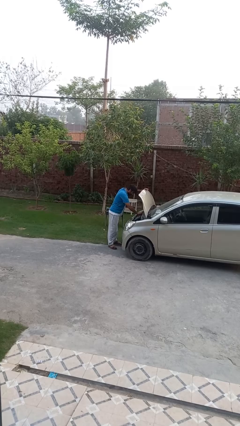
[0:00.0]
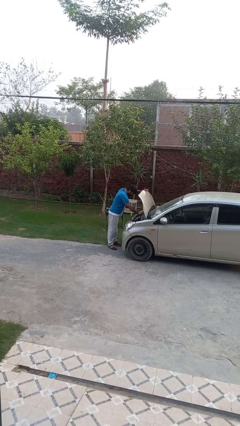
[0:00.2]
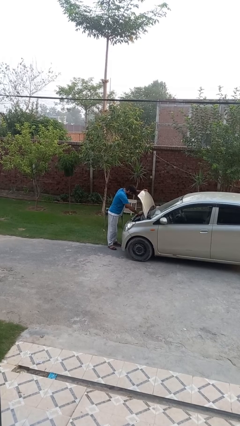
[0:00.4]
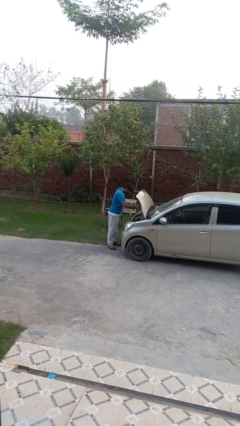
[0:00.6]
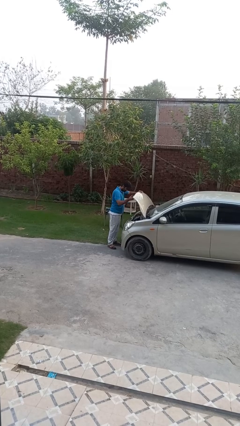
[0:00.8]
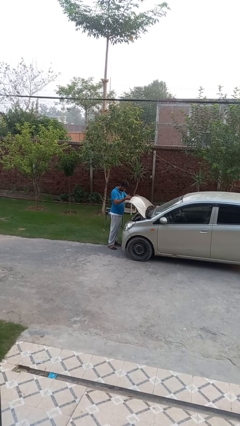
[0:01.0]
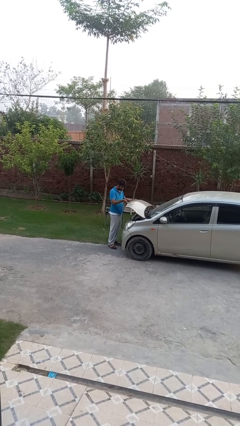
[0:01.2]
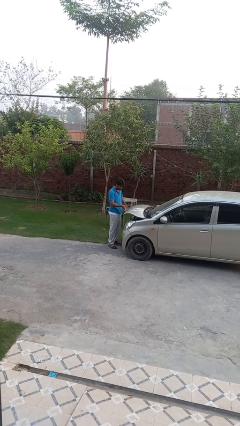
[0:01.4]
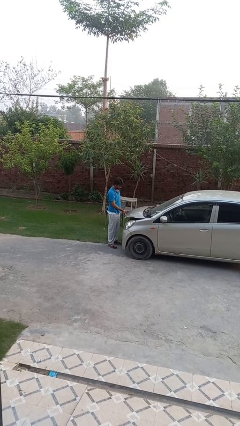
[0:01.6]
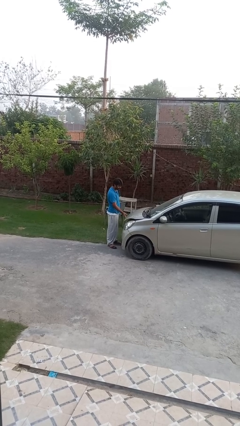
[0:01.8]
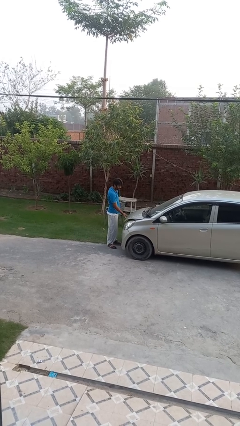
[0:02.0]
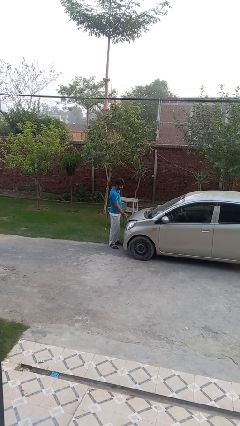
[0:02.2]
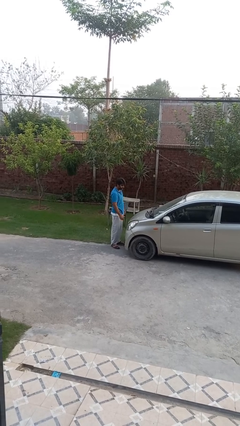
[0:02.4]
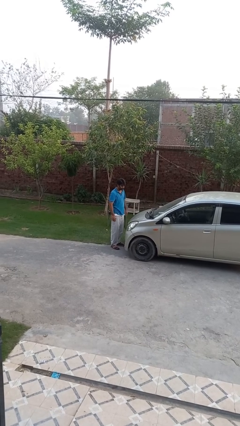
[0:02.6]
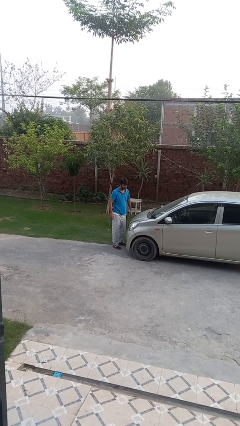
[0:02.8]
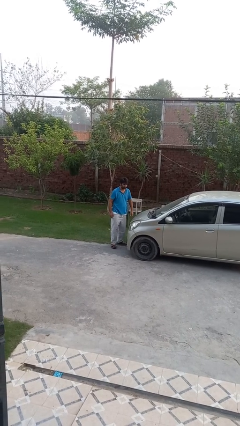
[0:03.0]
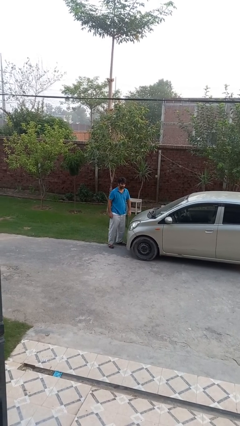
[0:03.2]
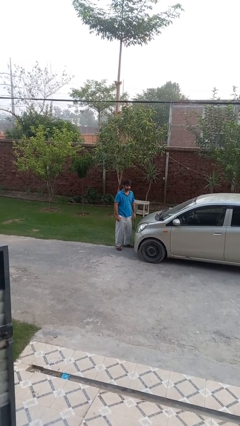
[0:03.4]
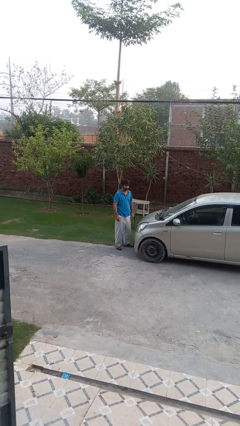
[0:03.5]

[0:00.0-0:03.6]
person closes car hood

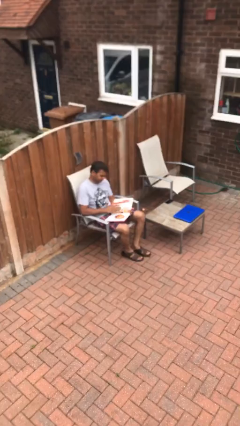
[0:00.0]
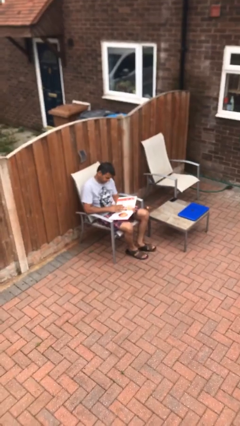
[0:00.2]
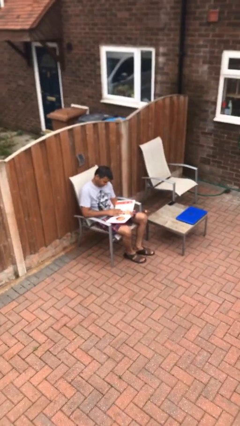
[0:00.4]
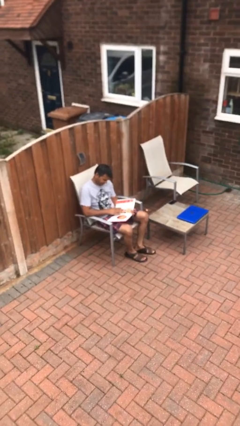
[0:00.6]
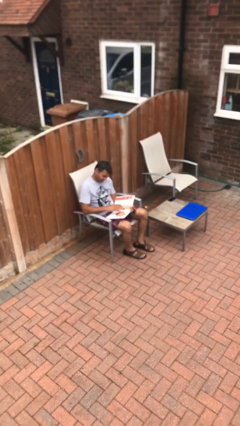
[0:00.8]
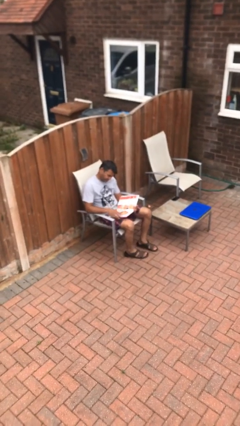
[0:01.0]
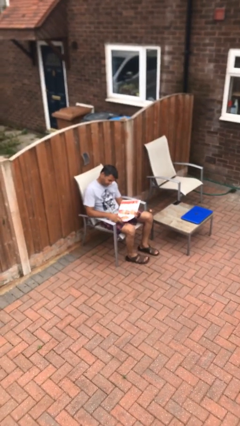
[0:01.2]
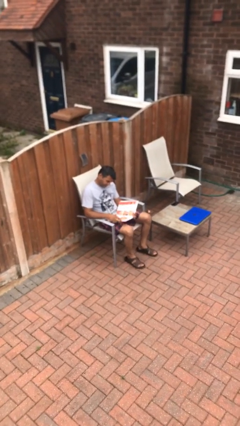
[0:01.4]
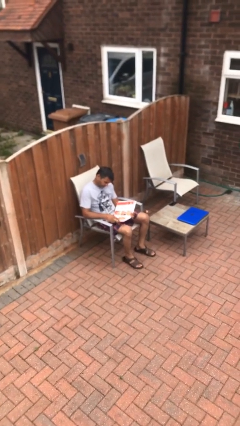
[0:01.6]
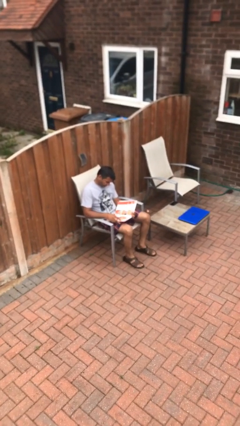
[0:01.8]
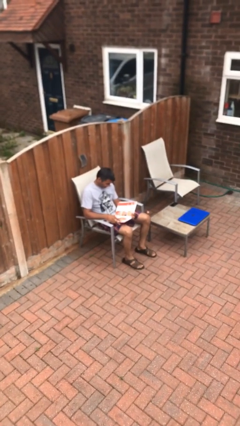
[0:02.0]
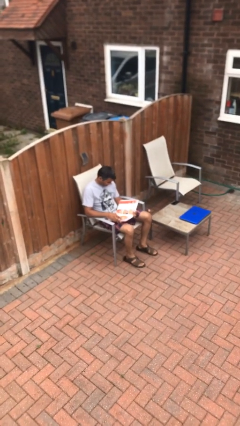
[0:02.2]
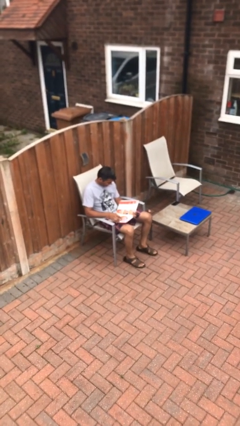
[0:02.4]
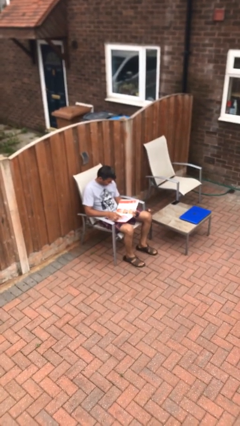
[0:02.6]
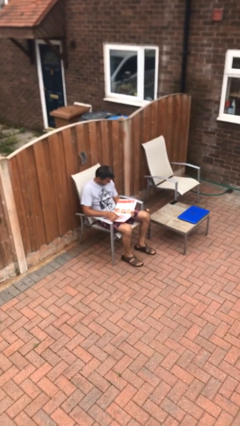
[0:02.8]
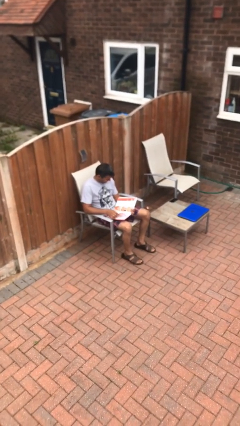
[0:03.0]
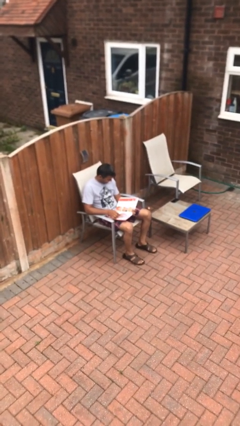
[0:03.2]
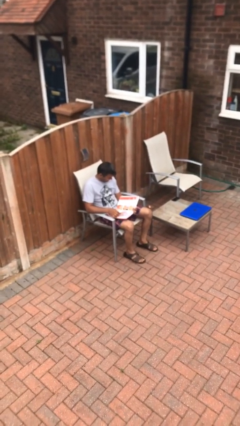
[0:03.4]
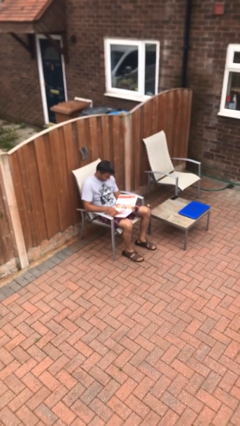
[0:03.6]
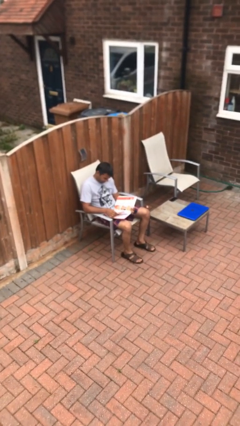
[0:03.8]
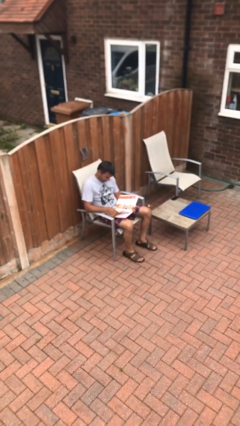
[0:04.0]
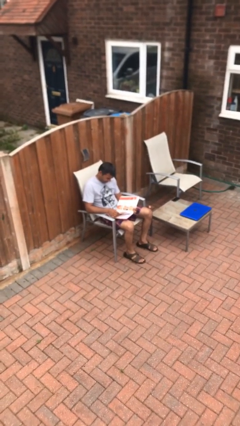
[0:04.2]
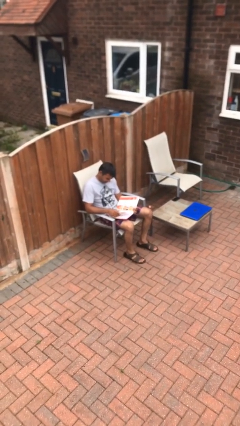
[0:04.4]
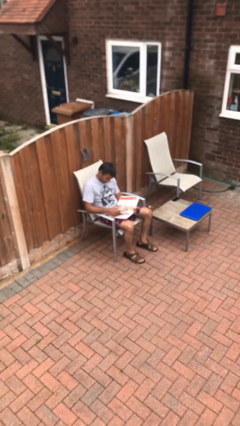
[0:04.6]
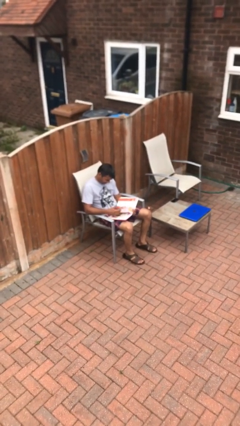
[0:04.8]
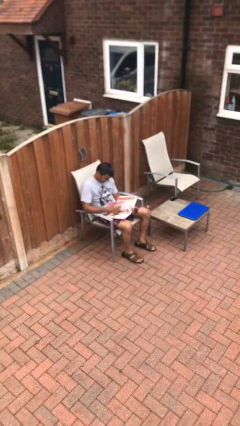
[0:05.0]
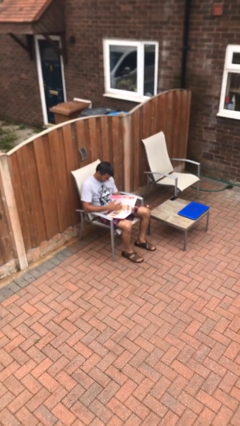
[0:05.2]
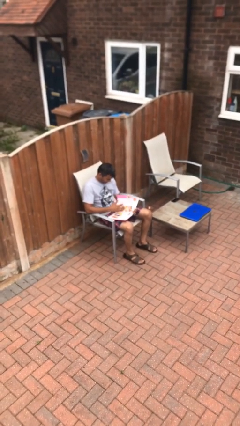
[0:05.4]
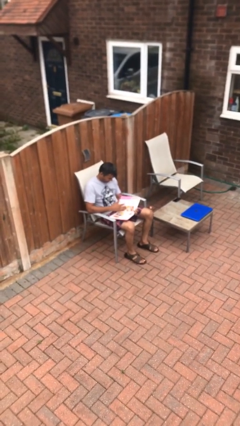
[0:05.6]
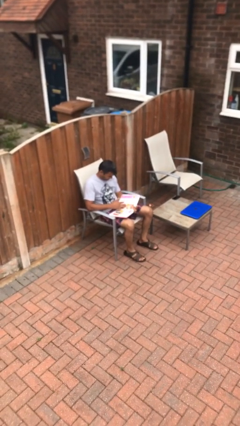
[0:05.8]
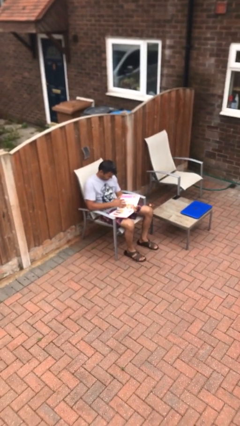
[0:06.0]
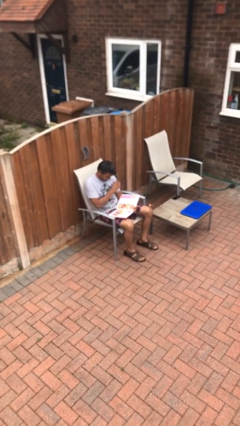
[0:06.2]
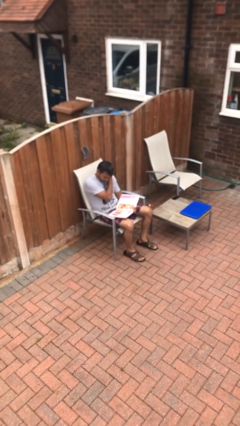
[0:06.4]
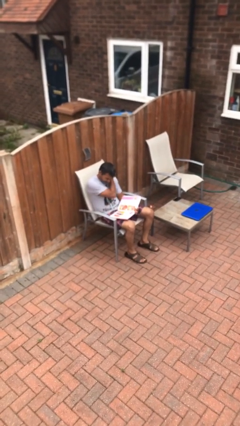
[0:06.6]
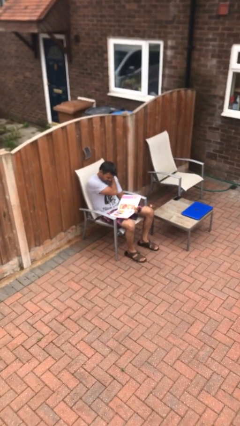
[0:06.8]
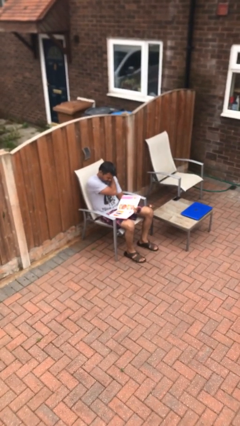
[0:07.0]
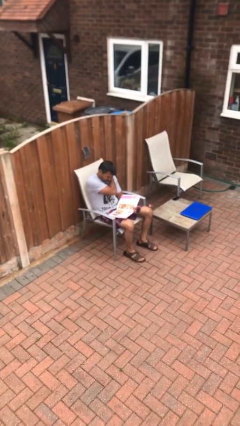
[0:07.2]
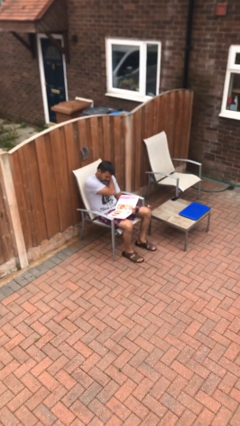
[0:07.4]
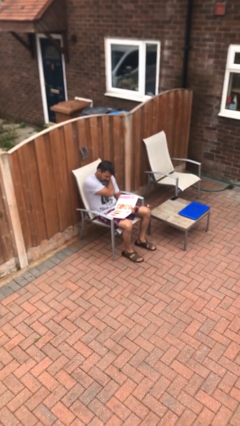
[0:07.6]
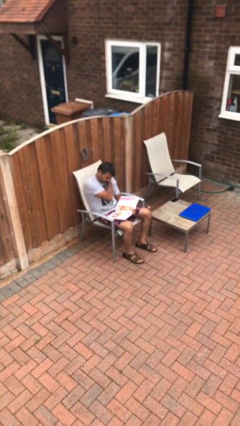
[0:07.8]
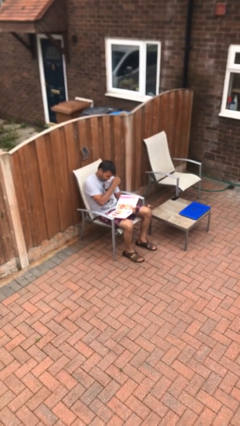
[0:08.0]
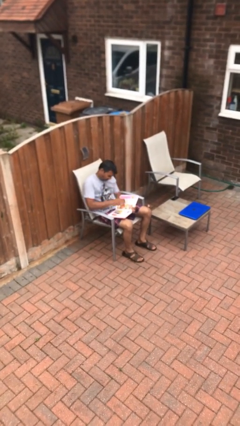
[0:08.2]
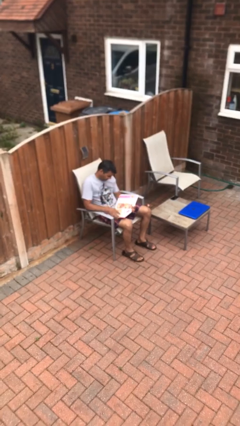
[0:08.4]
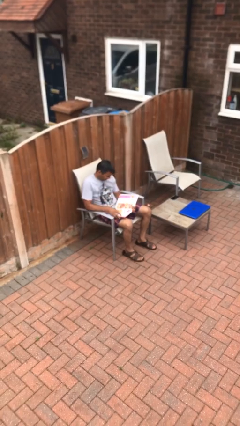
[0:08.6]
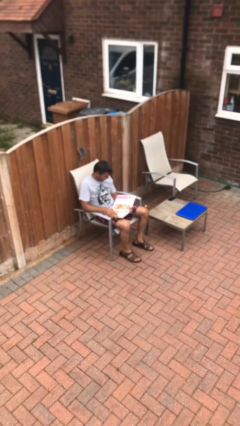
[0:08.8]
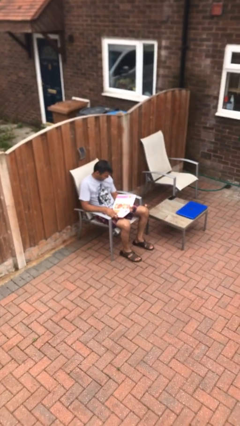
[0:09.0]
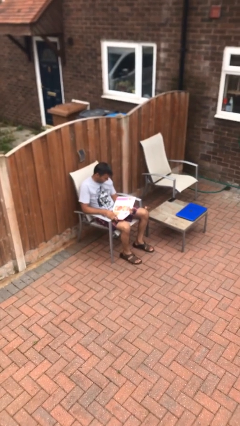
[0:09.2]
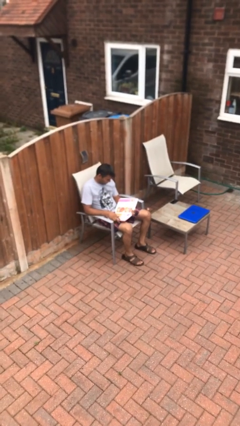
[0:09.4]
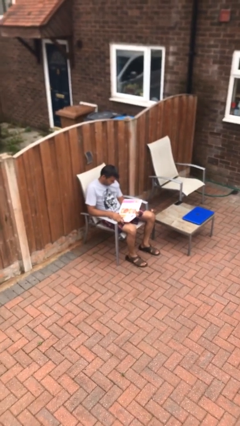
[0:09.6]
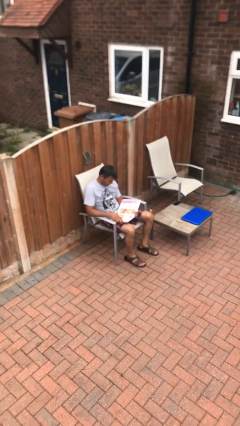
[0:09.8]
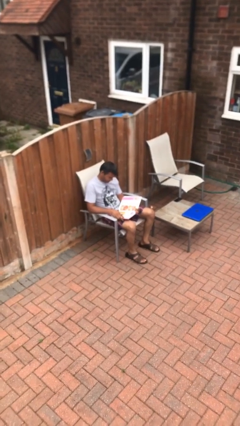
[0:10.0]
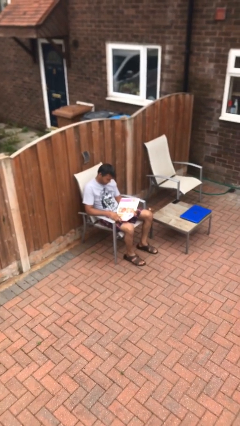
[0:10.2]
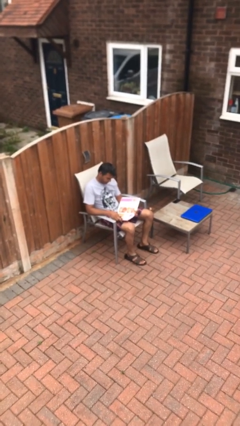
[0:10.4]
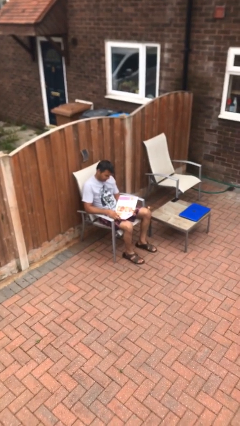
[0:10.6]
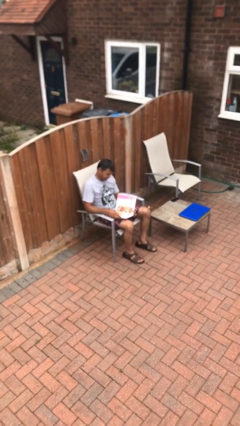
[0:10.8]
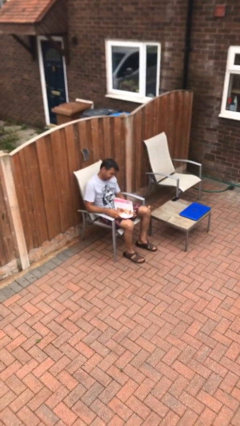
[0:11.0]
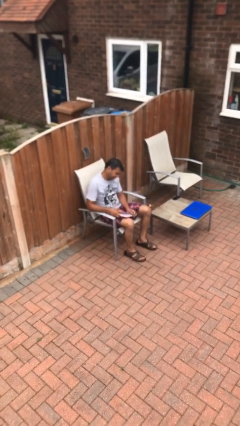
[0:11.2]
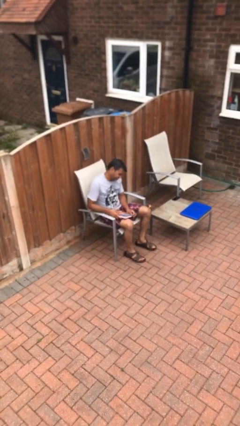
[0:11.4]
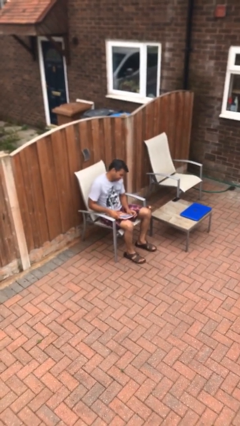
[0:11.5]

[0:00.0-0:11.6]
person reads document

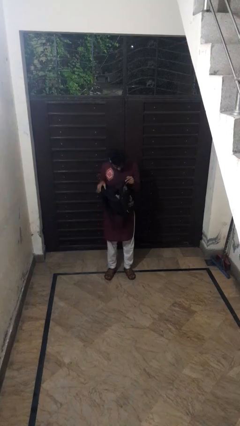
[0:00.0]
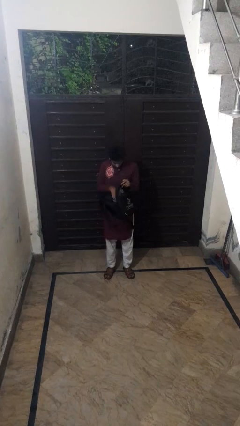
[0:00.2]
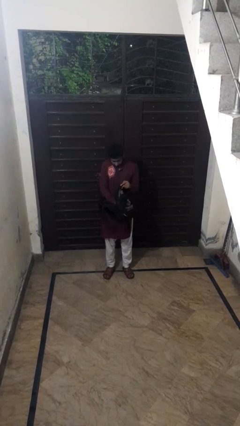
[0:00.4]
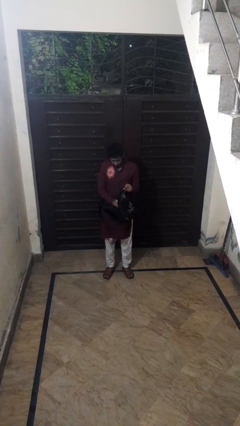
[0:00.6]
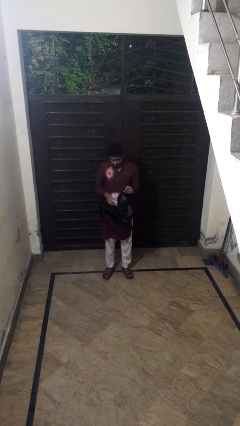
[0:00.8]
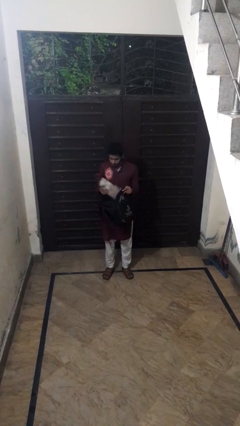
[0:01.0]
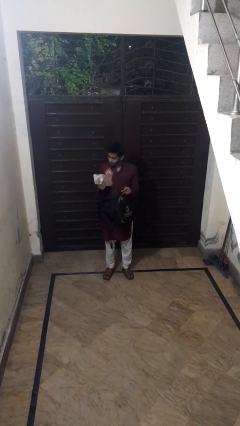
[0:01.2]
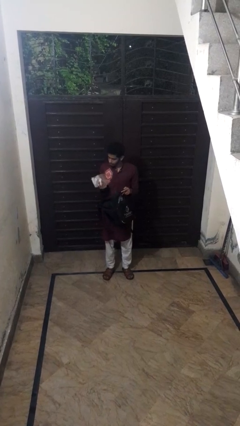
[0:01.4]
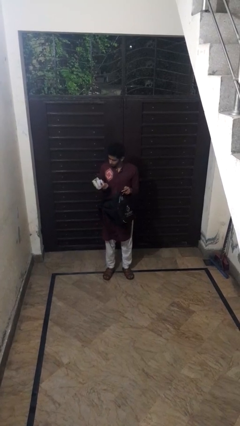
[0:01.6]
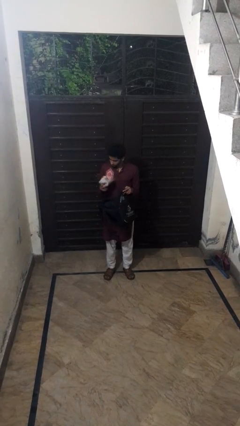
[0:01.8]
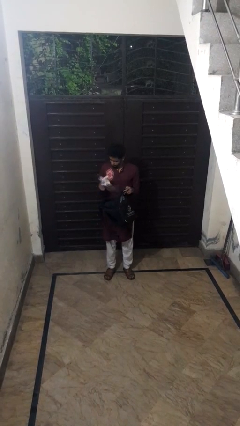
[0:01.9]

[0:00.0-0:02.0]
person takes object from backpack

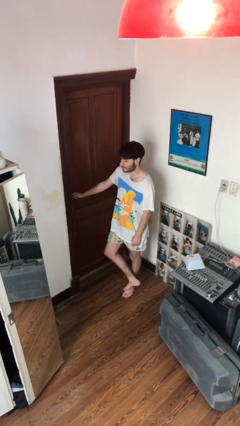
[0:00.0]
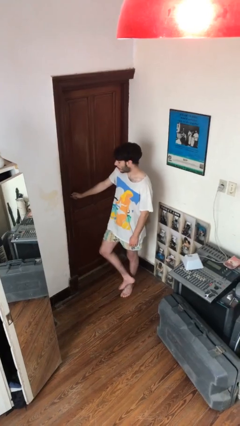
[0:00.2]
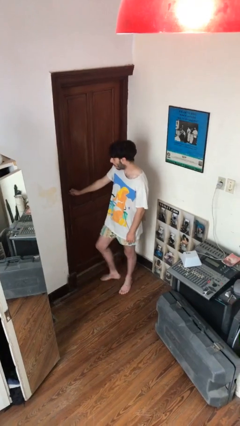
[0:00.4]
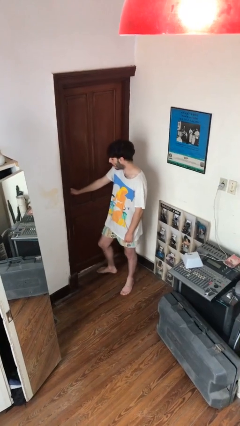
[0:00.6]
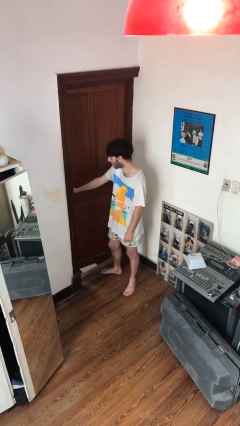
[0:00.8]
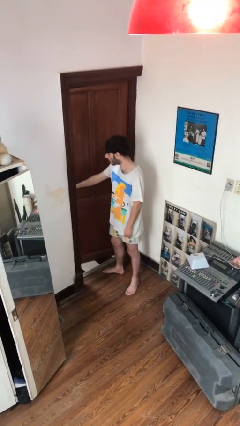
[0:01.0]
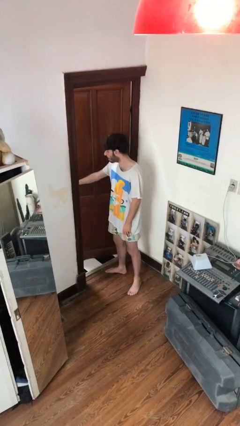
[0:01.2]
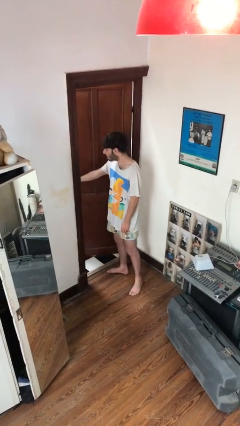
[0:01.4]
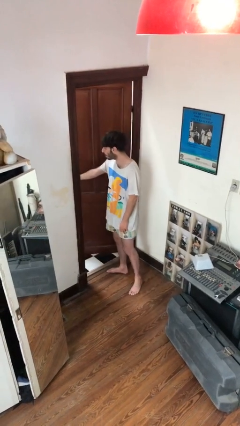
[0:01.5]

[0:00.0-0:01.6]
person opens facility door
